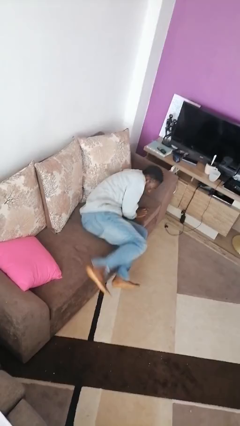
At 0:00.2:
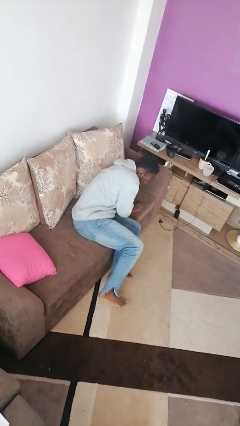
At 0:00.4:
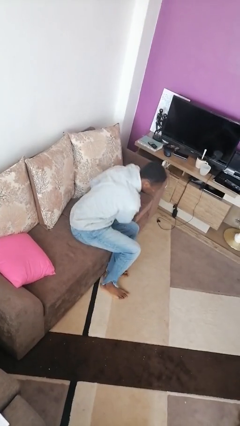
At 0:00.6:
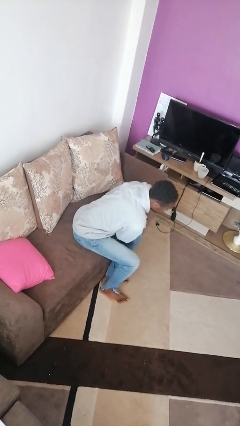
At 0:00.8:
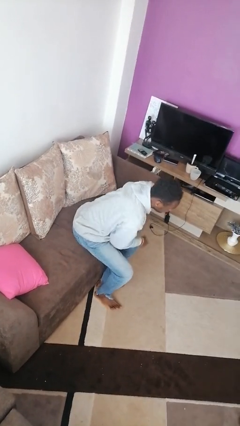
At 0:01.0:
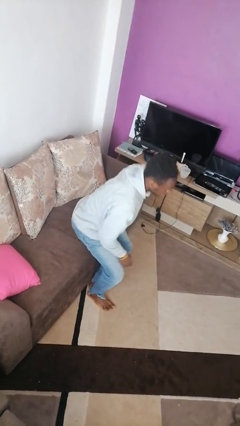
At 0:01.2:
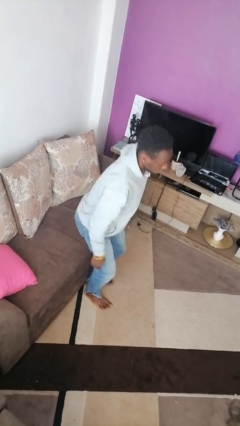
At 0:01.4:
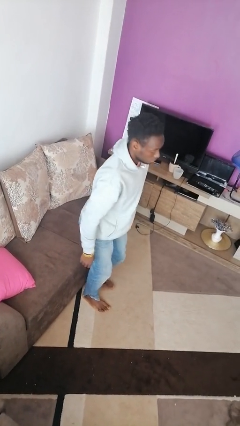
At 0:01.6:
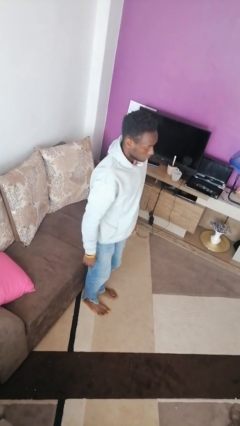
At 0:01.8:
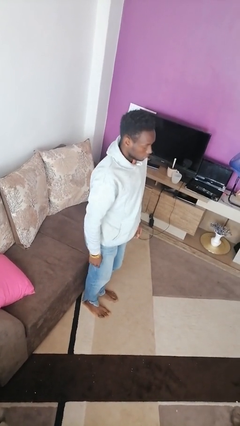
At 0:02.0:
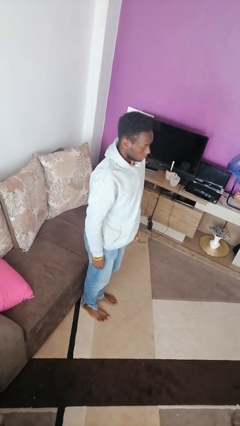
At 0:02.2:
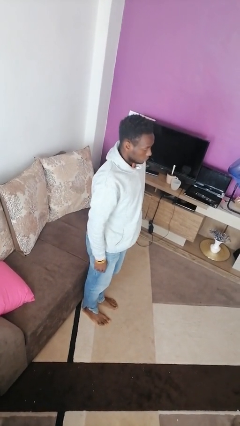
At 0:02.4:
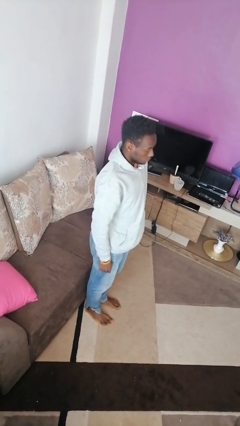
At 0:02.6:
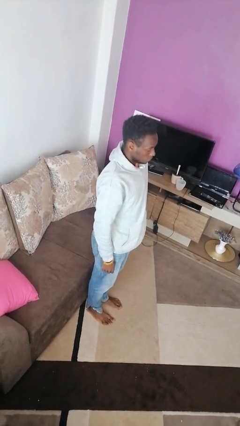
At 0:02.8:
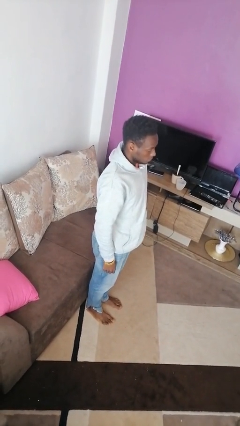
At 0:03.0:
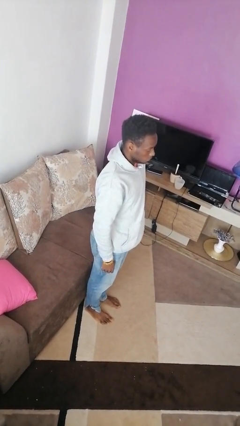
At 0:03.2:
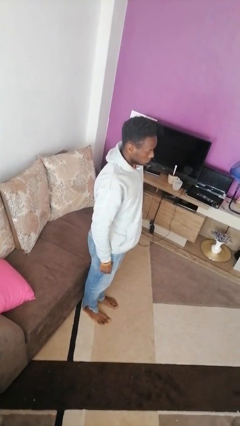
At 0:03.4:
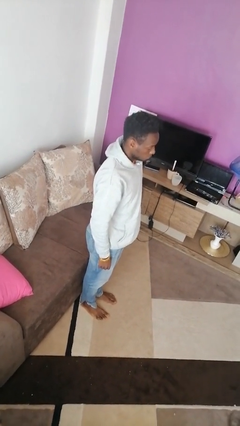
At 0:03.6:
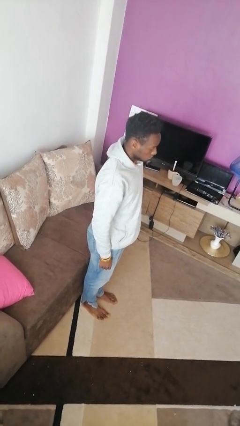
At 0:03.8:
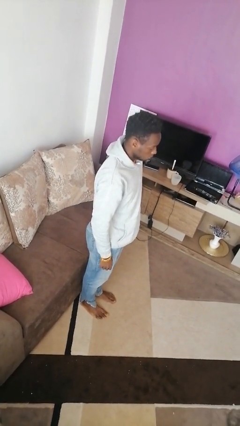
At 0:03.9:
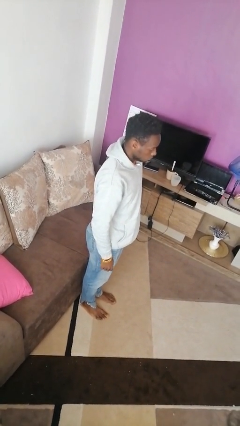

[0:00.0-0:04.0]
person stands up

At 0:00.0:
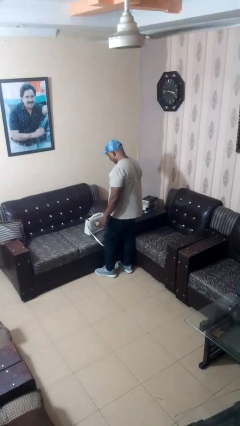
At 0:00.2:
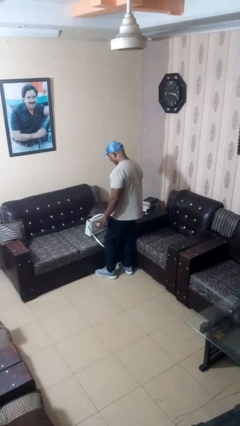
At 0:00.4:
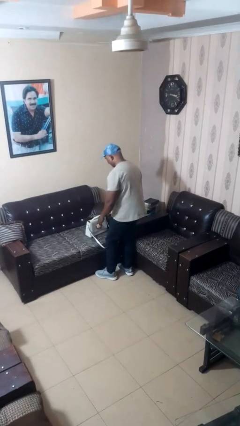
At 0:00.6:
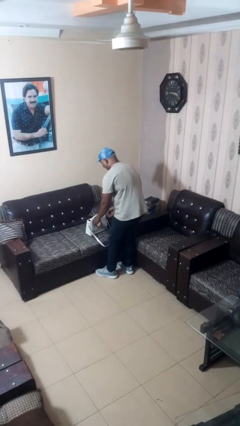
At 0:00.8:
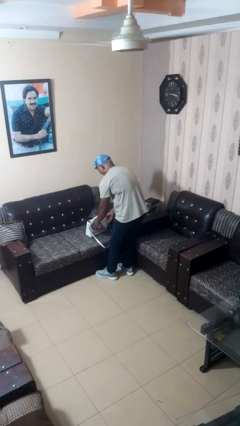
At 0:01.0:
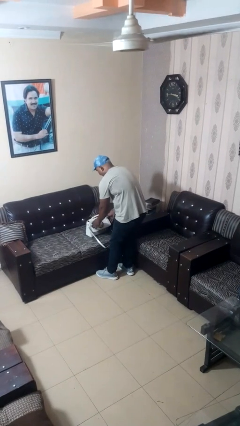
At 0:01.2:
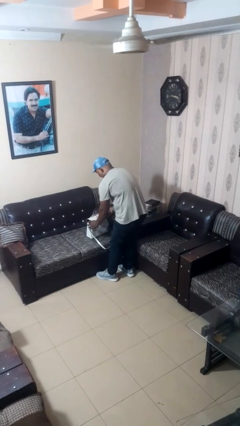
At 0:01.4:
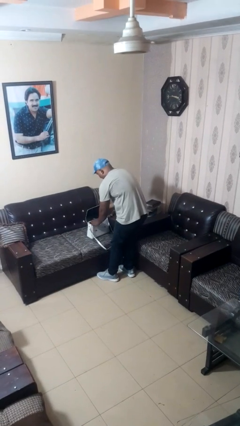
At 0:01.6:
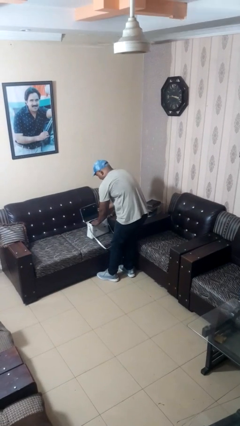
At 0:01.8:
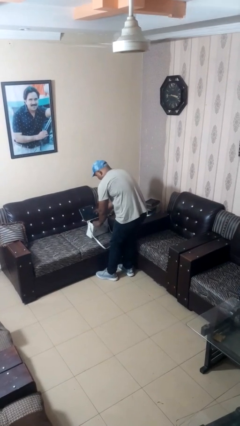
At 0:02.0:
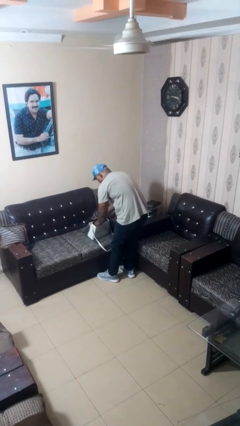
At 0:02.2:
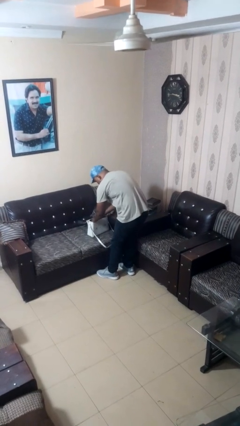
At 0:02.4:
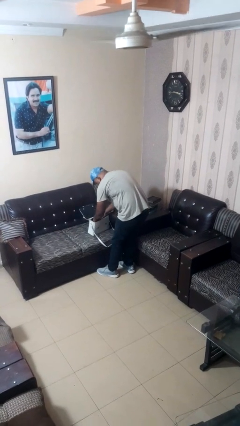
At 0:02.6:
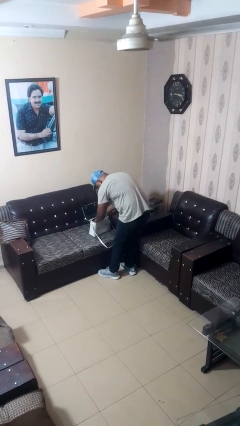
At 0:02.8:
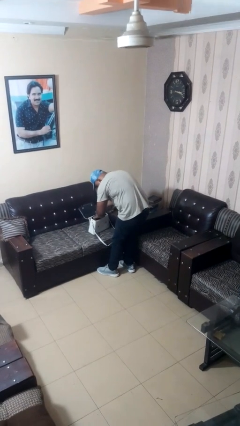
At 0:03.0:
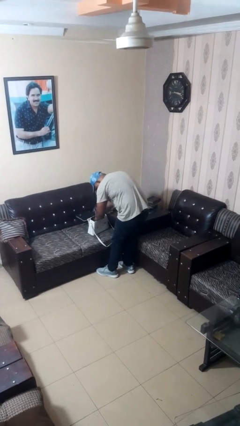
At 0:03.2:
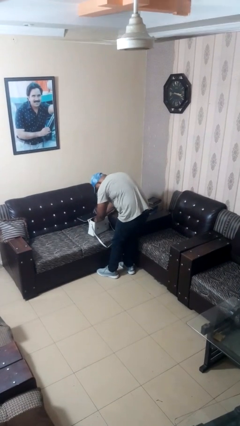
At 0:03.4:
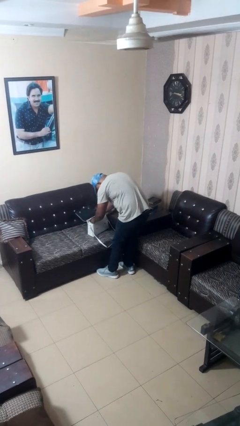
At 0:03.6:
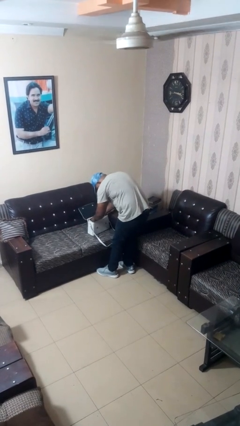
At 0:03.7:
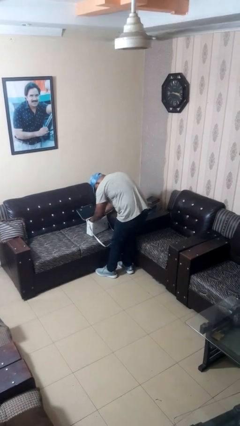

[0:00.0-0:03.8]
person searches in purse

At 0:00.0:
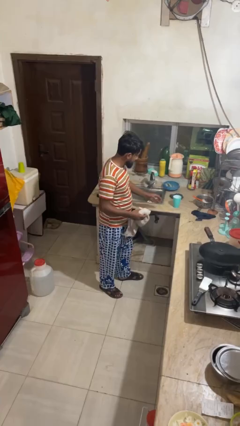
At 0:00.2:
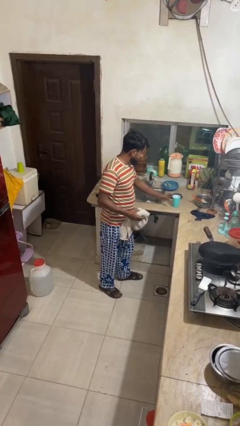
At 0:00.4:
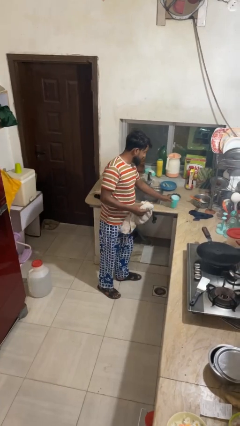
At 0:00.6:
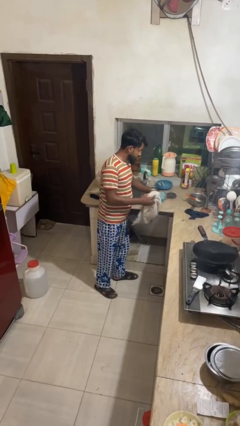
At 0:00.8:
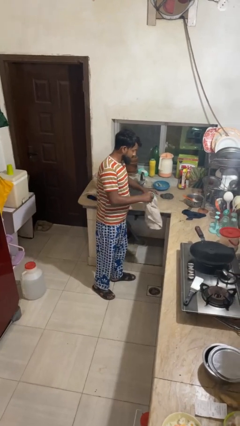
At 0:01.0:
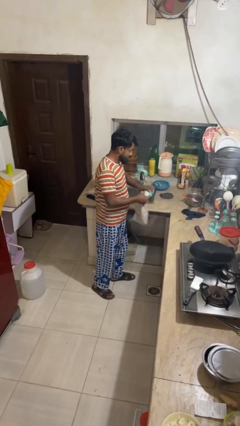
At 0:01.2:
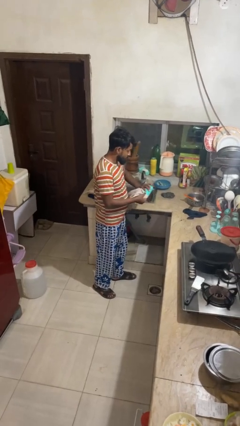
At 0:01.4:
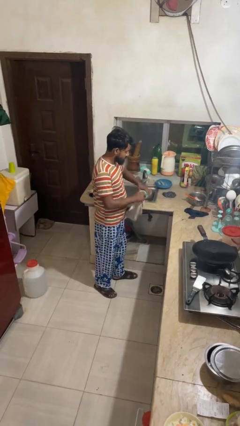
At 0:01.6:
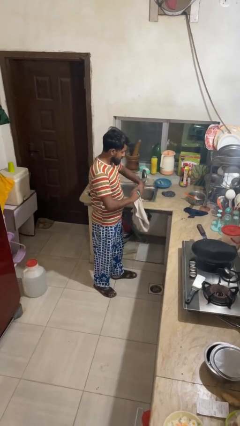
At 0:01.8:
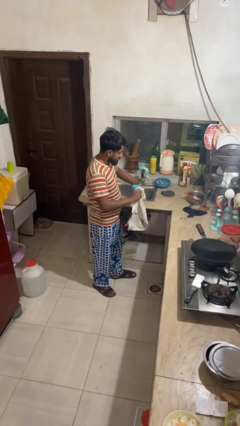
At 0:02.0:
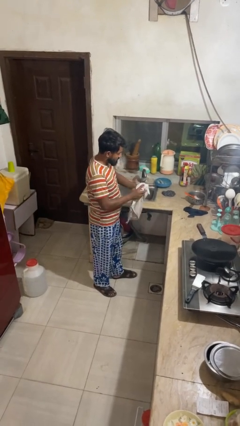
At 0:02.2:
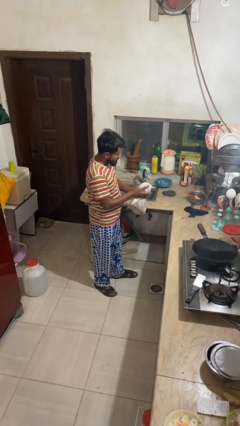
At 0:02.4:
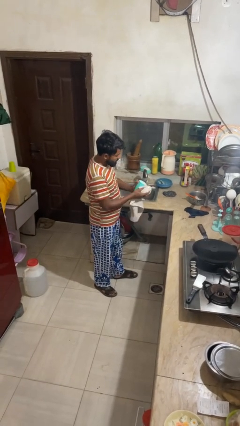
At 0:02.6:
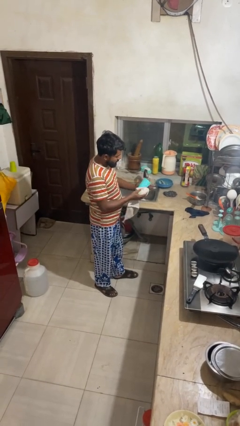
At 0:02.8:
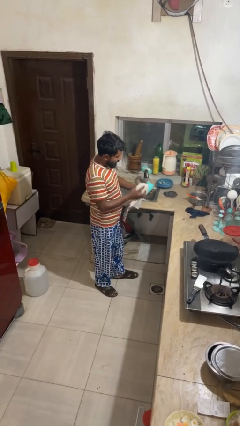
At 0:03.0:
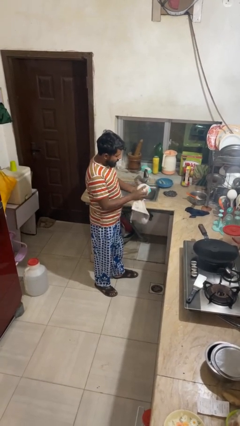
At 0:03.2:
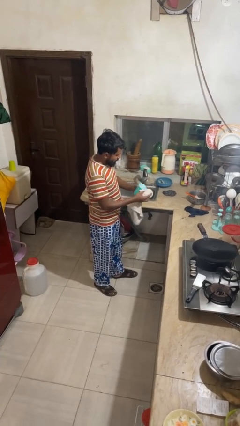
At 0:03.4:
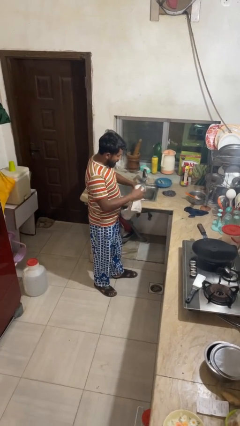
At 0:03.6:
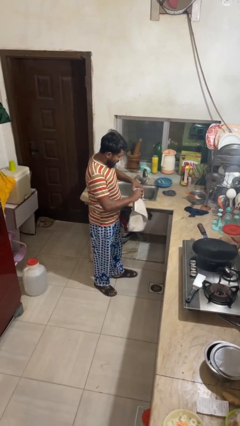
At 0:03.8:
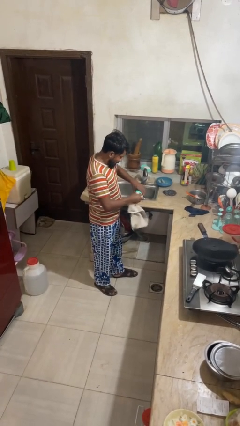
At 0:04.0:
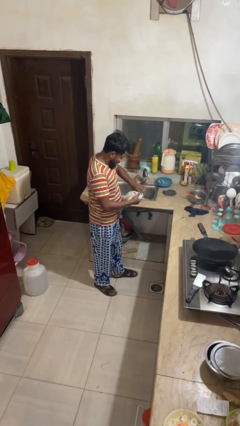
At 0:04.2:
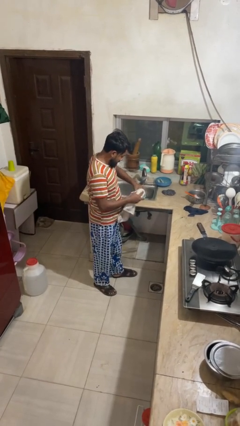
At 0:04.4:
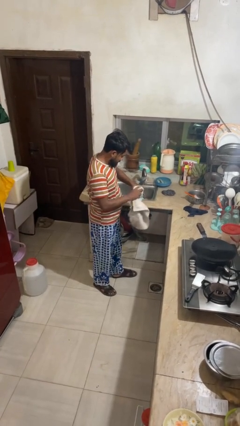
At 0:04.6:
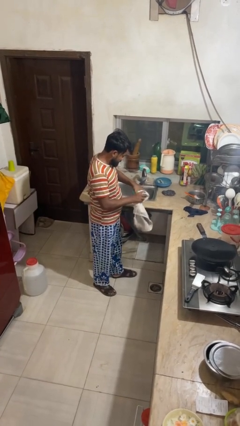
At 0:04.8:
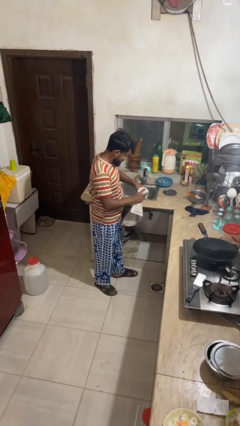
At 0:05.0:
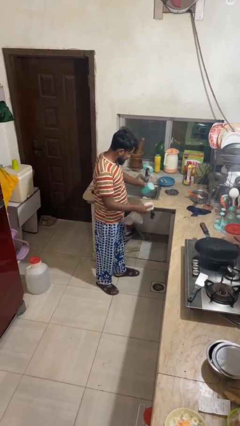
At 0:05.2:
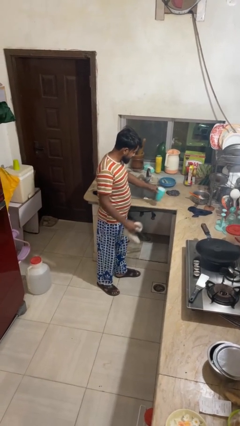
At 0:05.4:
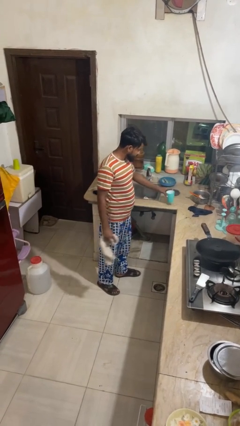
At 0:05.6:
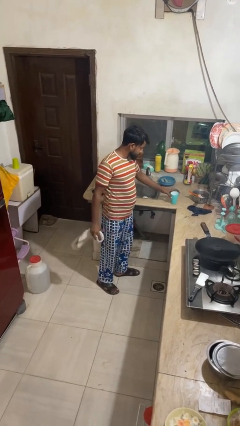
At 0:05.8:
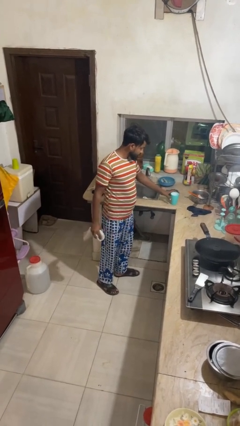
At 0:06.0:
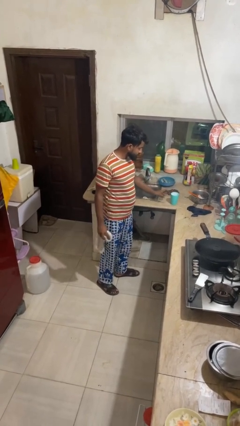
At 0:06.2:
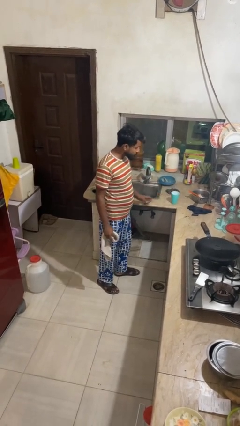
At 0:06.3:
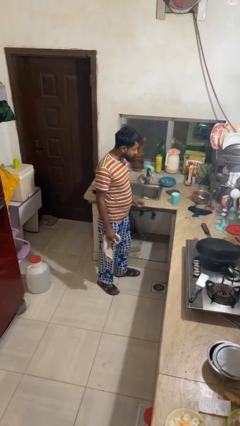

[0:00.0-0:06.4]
person dries dish

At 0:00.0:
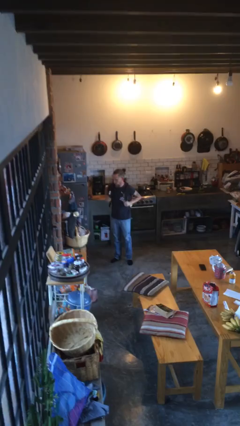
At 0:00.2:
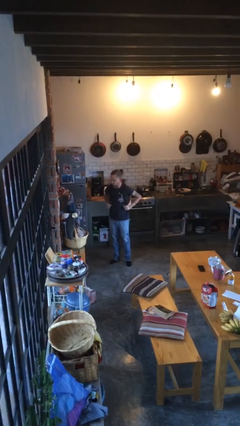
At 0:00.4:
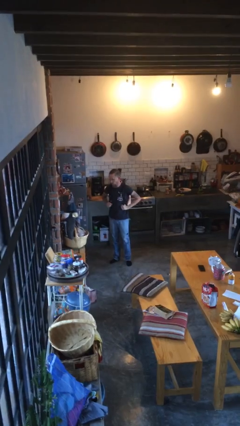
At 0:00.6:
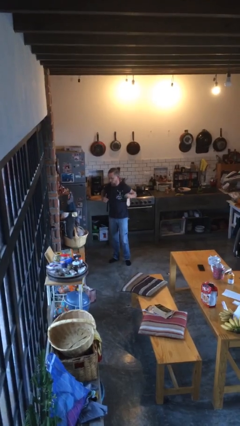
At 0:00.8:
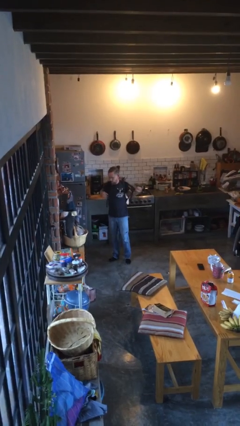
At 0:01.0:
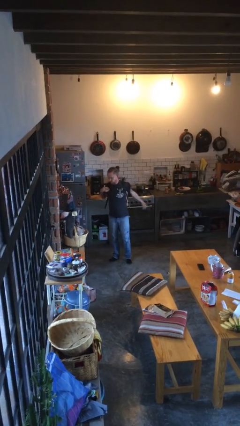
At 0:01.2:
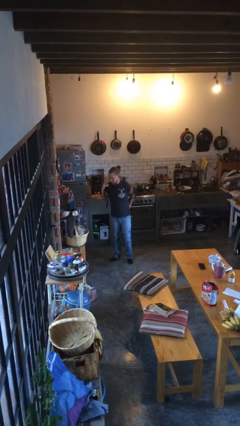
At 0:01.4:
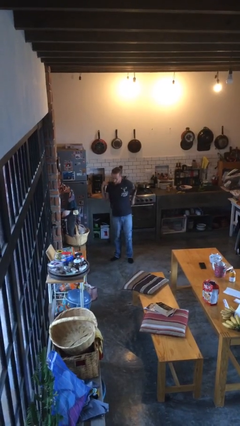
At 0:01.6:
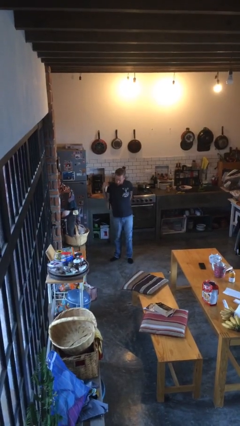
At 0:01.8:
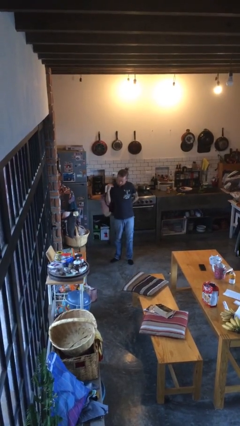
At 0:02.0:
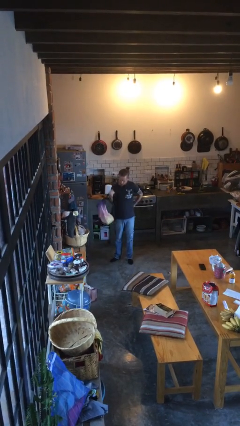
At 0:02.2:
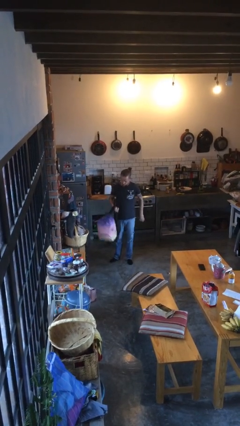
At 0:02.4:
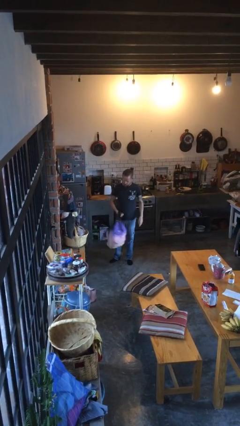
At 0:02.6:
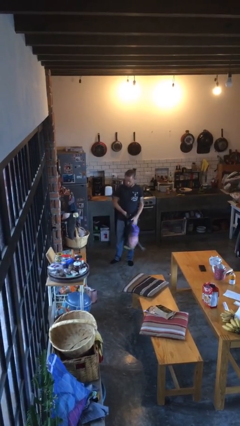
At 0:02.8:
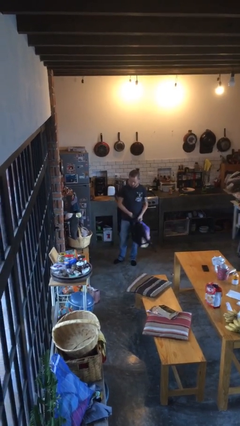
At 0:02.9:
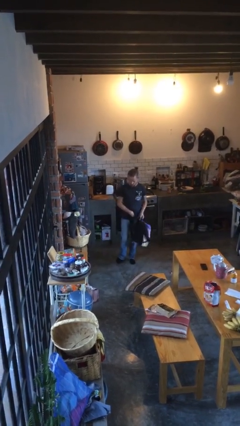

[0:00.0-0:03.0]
person takes off backpack

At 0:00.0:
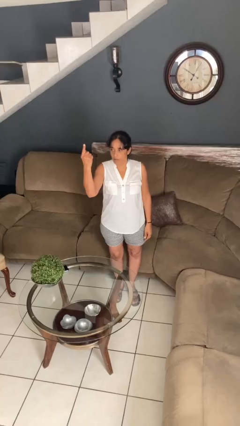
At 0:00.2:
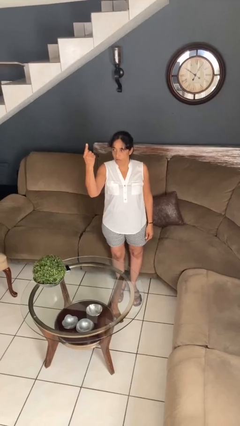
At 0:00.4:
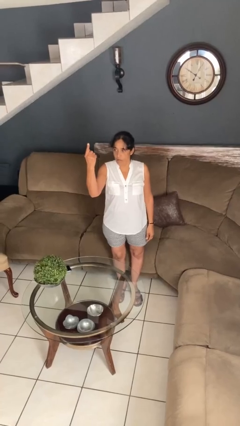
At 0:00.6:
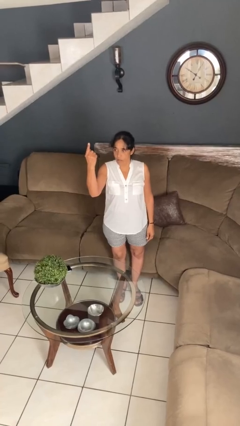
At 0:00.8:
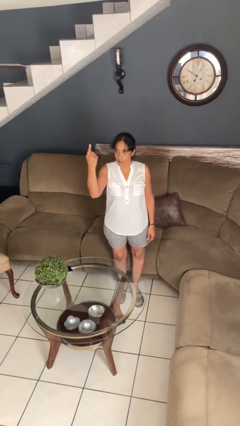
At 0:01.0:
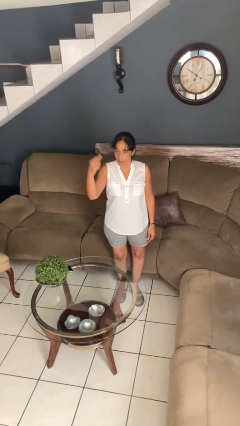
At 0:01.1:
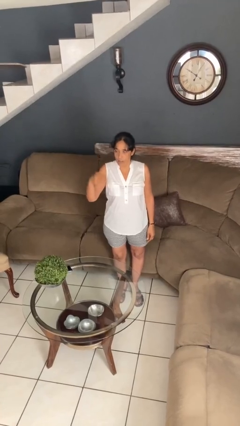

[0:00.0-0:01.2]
person gestures number one
